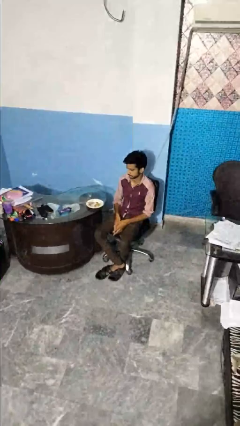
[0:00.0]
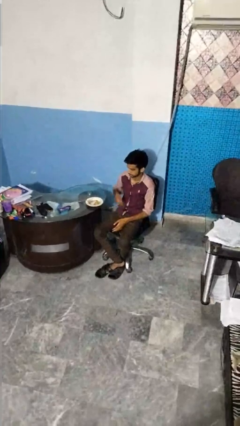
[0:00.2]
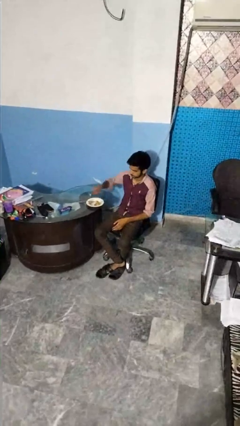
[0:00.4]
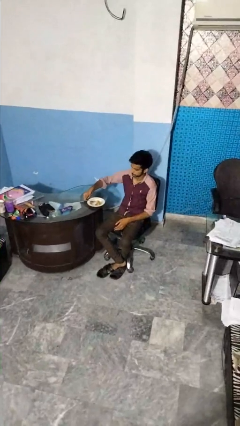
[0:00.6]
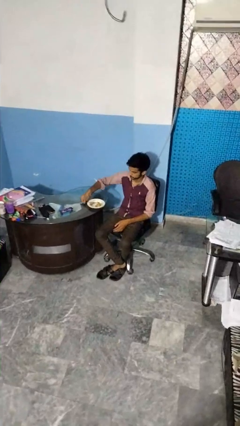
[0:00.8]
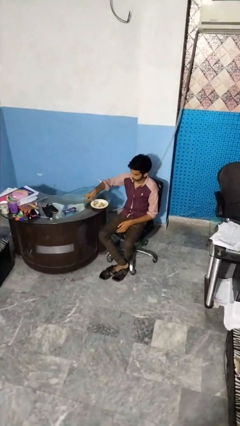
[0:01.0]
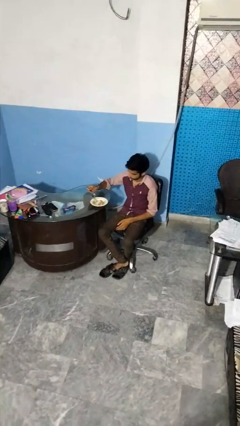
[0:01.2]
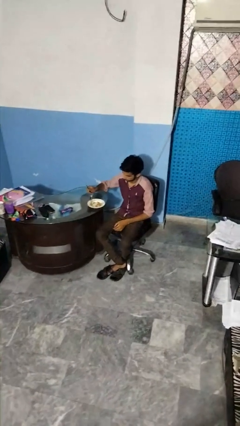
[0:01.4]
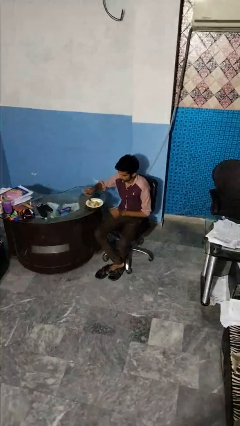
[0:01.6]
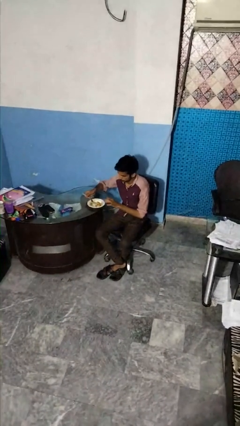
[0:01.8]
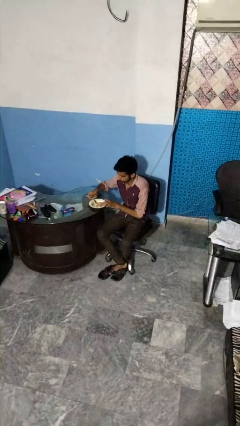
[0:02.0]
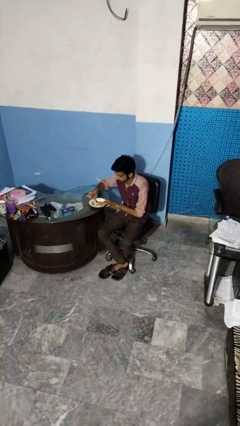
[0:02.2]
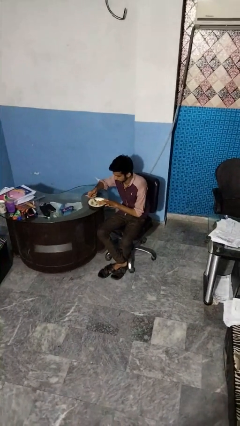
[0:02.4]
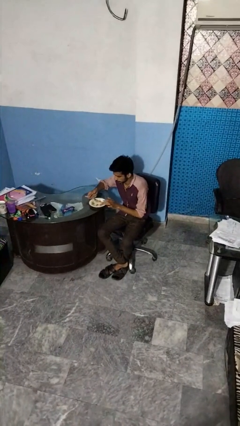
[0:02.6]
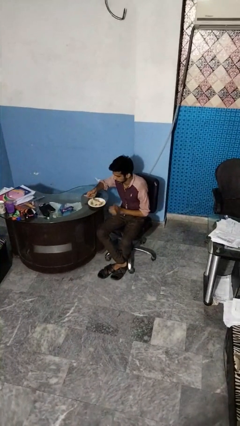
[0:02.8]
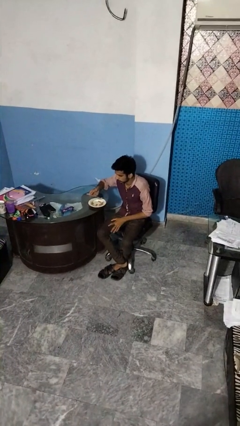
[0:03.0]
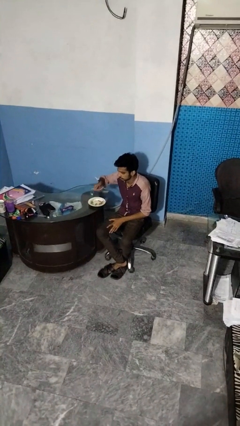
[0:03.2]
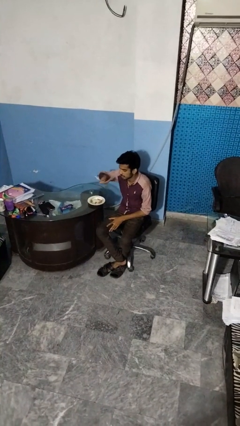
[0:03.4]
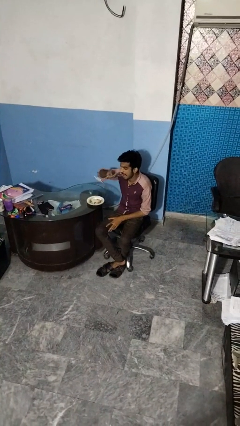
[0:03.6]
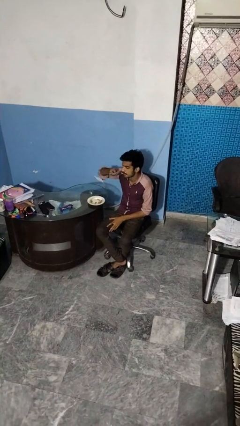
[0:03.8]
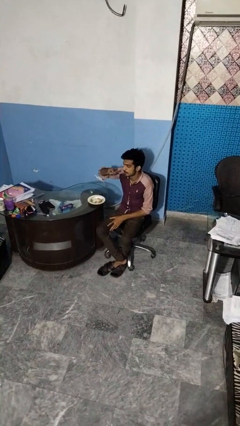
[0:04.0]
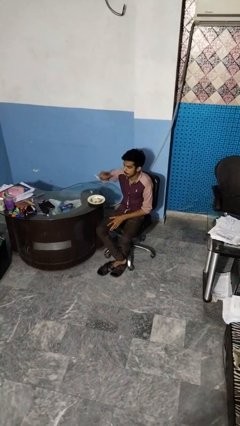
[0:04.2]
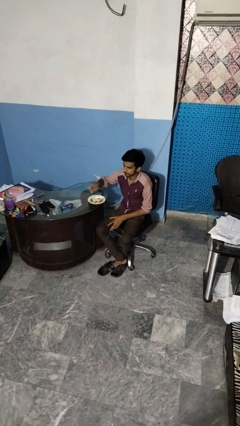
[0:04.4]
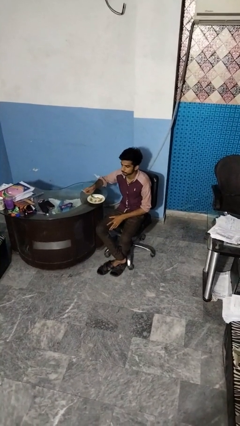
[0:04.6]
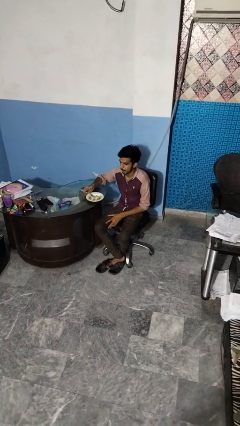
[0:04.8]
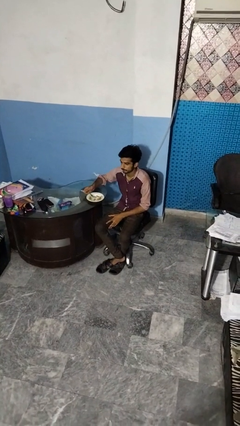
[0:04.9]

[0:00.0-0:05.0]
person eats with utensil

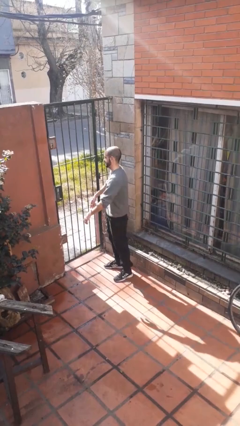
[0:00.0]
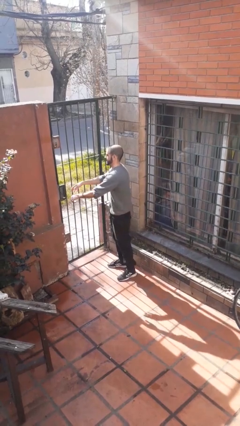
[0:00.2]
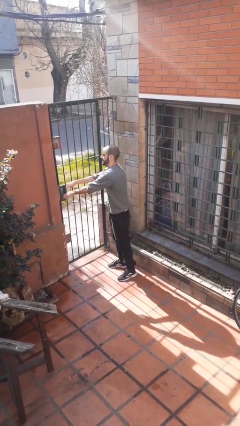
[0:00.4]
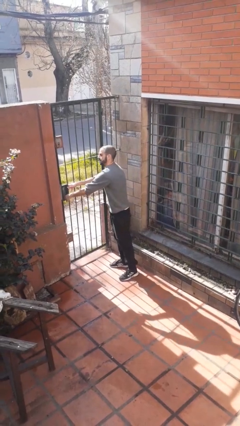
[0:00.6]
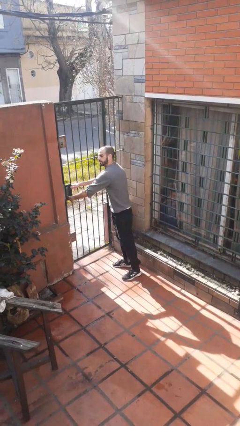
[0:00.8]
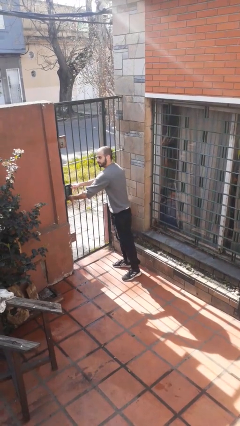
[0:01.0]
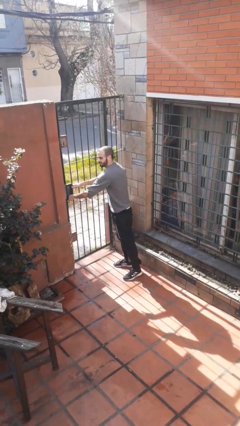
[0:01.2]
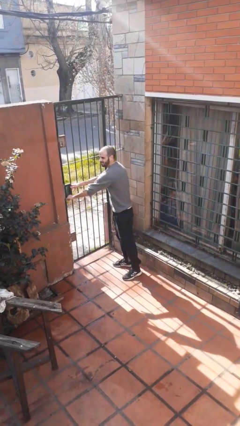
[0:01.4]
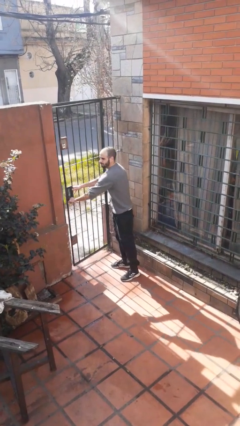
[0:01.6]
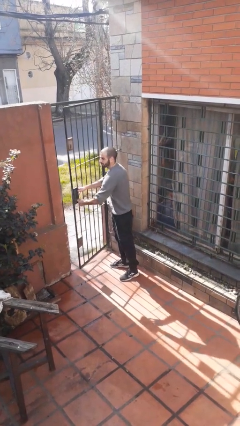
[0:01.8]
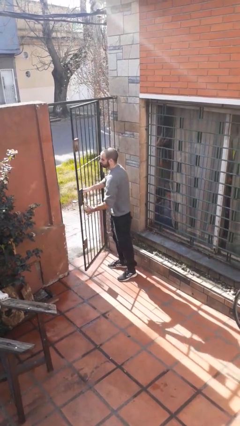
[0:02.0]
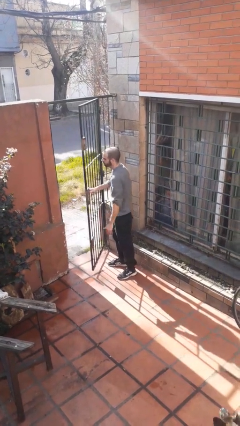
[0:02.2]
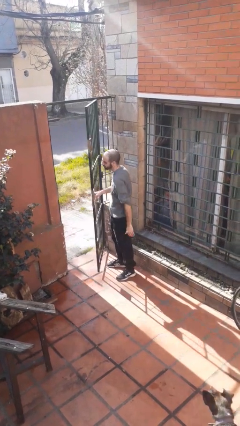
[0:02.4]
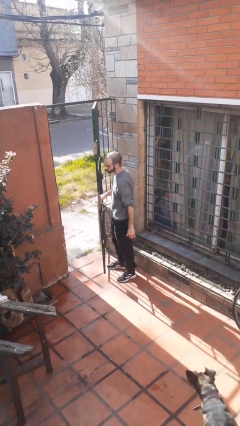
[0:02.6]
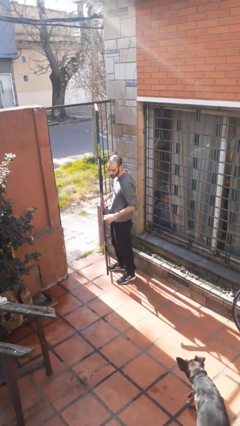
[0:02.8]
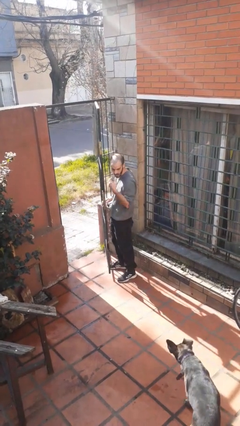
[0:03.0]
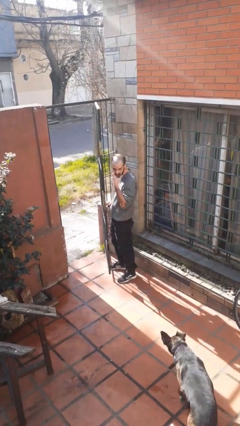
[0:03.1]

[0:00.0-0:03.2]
person opens gate

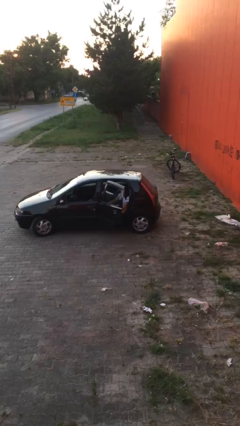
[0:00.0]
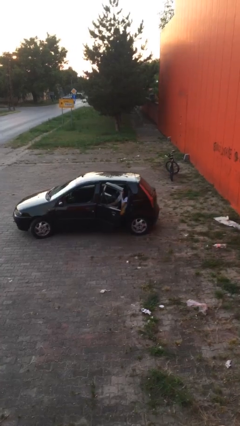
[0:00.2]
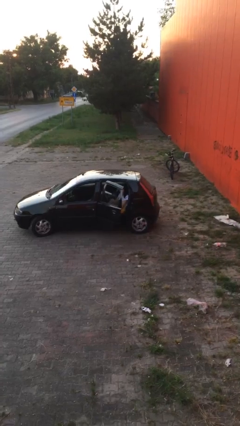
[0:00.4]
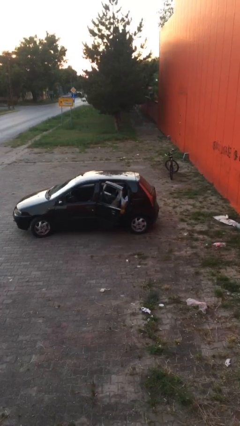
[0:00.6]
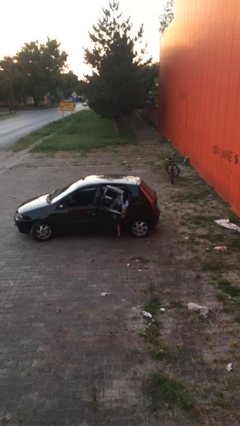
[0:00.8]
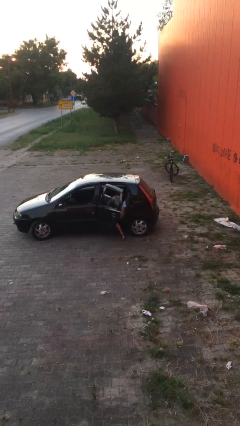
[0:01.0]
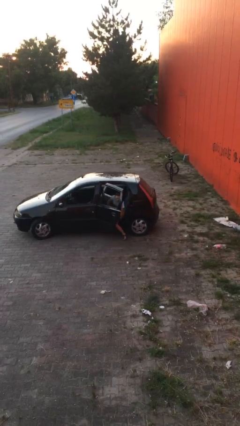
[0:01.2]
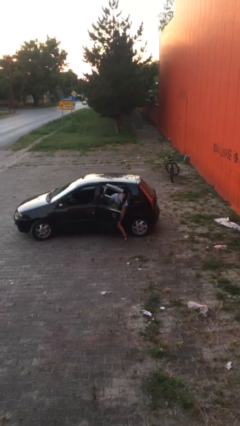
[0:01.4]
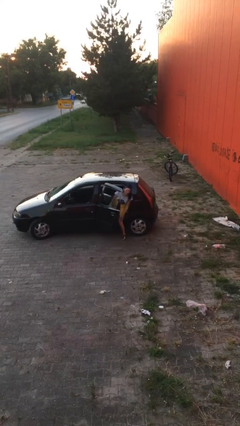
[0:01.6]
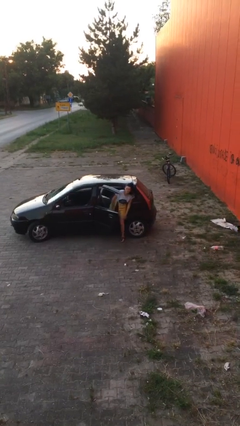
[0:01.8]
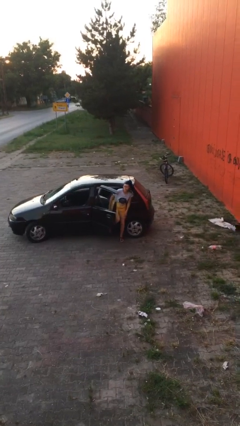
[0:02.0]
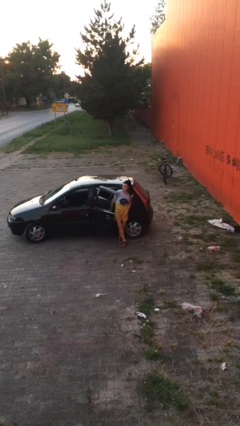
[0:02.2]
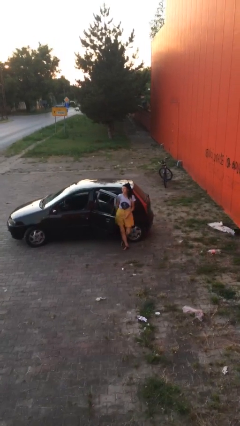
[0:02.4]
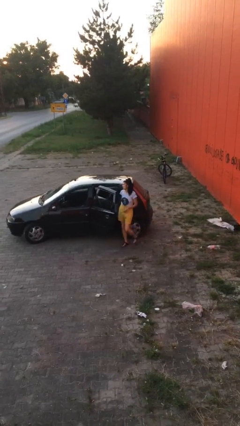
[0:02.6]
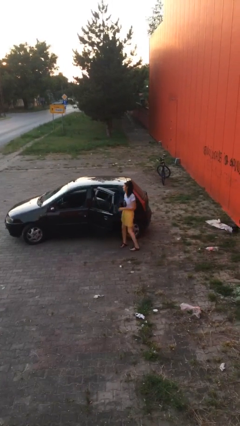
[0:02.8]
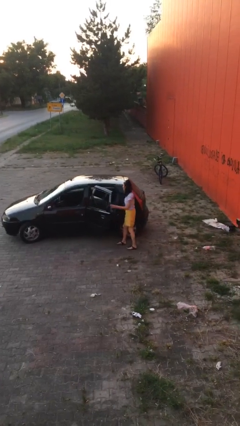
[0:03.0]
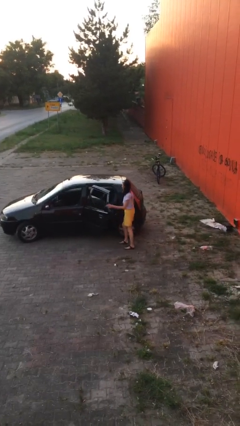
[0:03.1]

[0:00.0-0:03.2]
person exits car

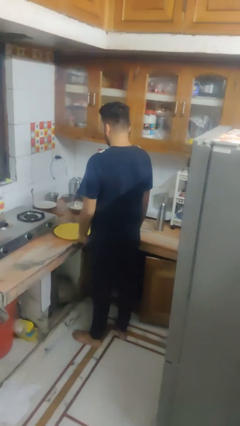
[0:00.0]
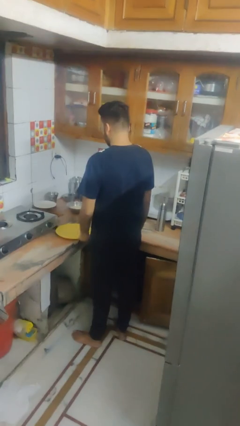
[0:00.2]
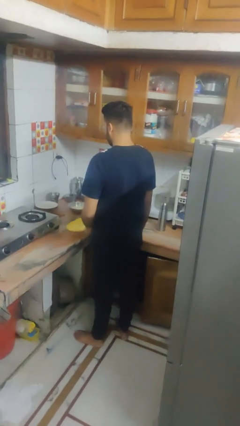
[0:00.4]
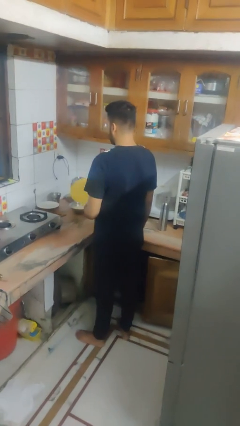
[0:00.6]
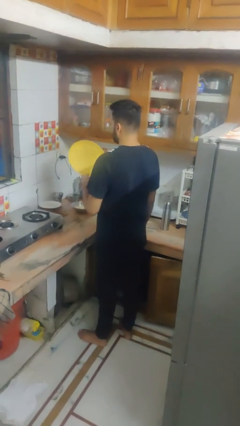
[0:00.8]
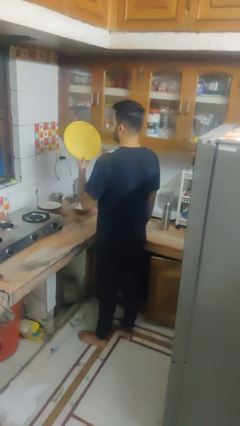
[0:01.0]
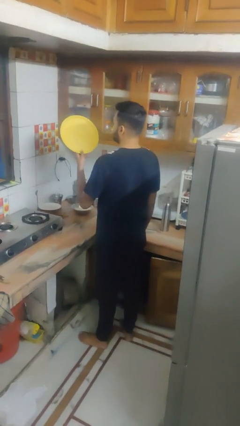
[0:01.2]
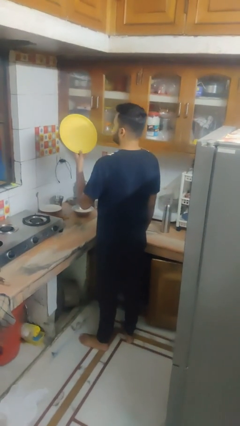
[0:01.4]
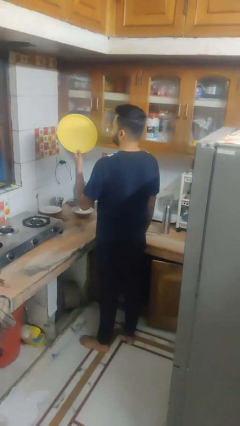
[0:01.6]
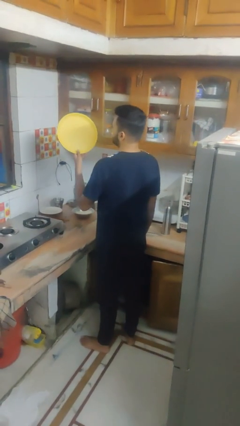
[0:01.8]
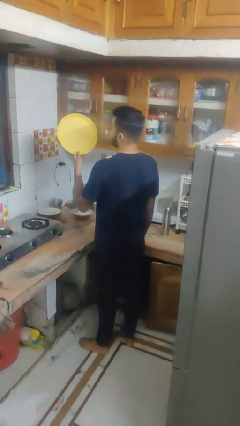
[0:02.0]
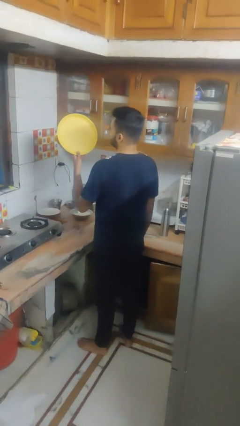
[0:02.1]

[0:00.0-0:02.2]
person picks up object from countertop

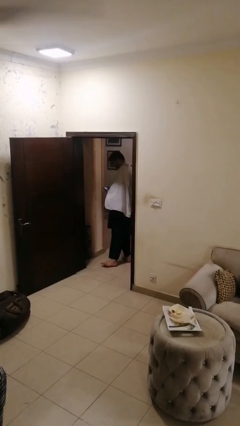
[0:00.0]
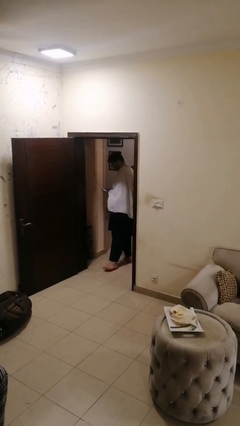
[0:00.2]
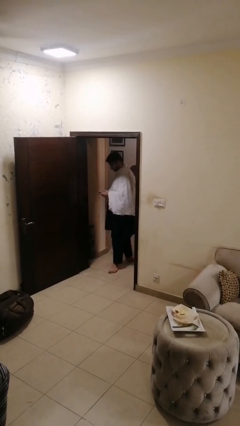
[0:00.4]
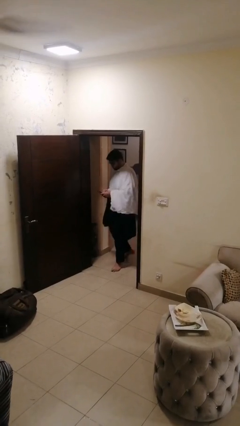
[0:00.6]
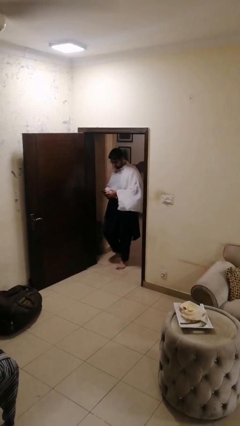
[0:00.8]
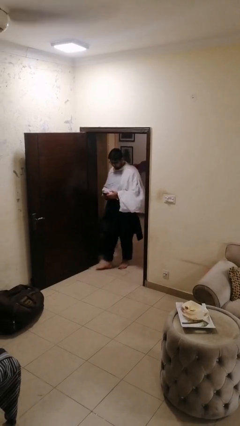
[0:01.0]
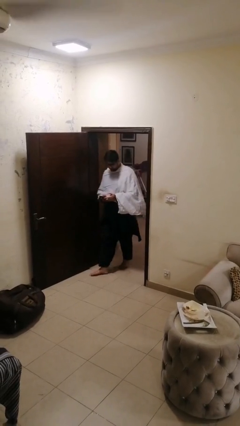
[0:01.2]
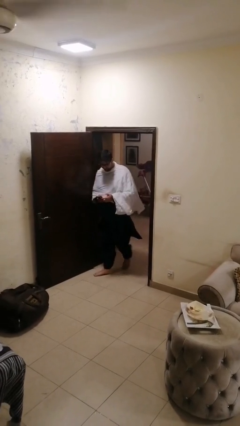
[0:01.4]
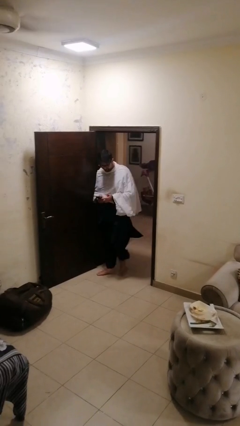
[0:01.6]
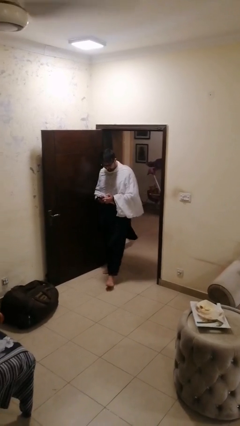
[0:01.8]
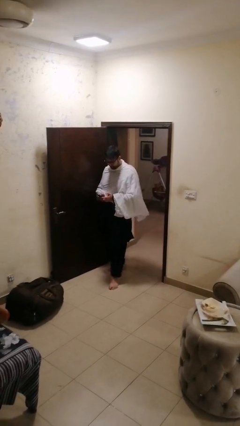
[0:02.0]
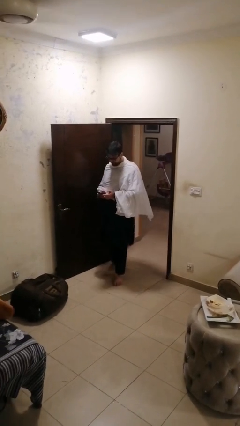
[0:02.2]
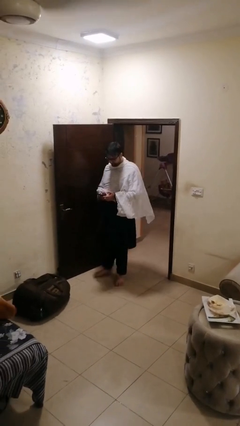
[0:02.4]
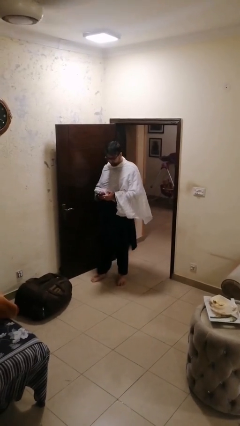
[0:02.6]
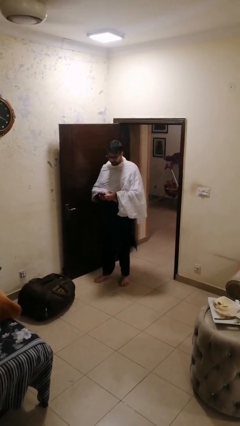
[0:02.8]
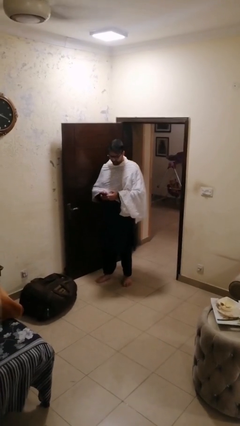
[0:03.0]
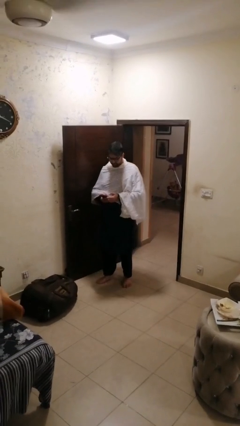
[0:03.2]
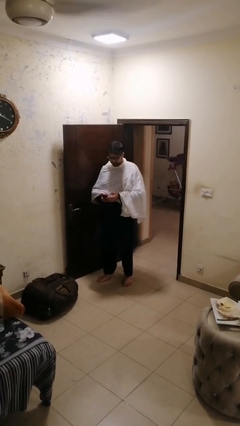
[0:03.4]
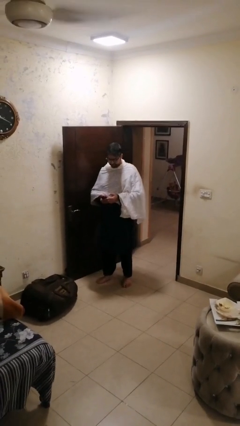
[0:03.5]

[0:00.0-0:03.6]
person enters scene through structure

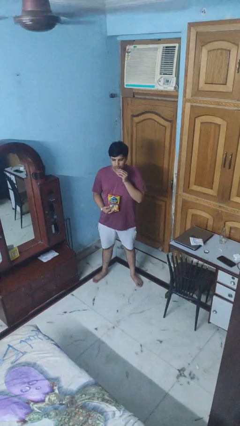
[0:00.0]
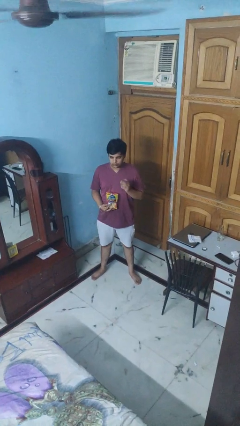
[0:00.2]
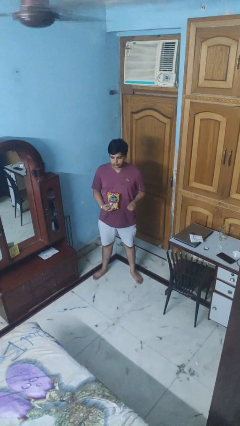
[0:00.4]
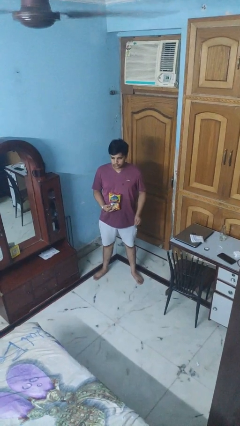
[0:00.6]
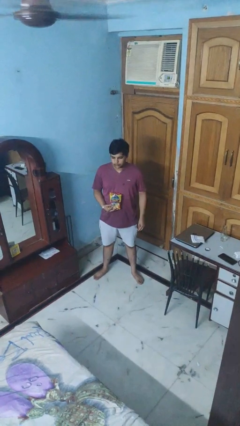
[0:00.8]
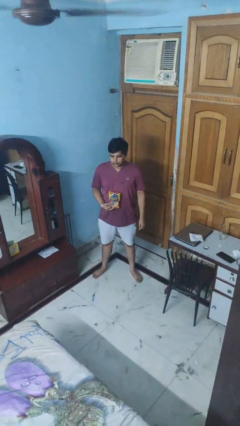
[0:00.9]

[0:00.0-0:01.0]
person eats snack from bag
